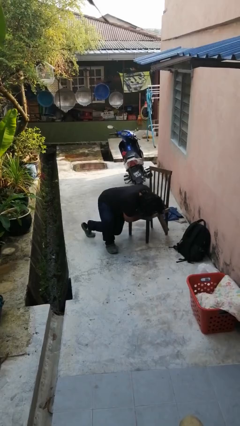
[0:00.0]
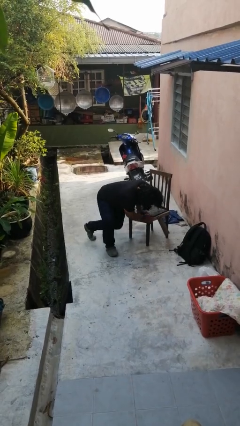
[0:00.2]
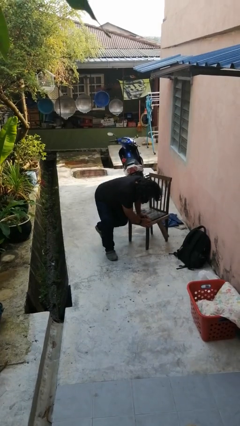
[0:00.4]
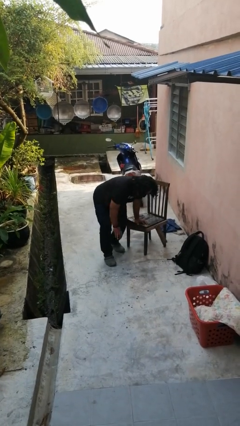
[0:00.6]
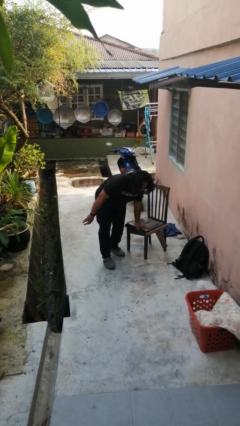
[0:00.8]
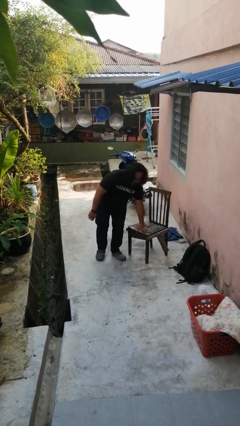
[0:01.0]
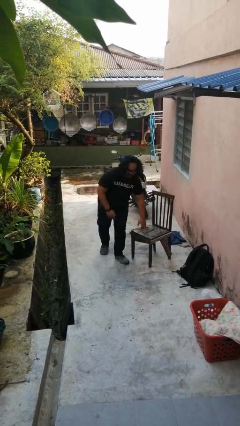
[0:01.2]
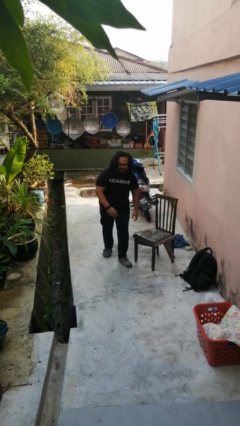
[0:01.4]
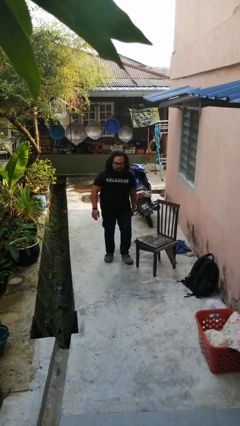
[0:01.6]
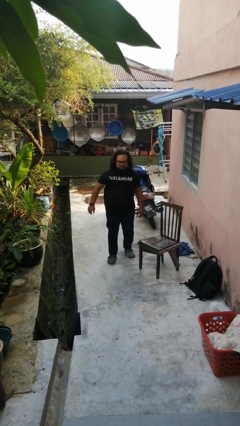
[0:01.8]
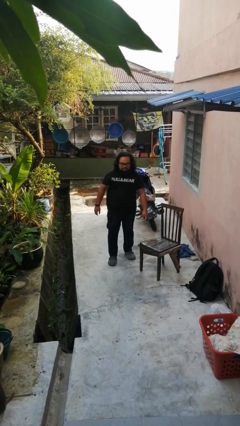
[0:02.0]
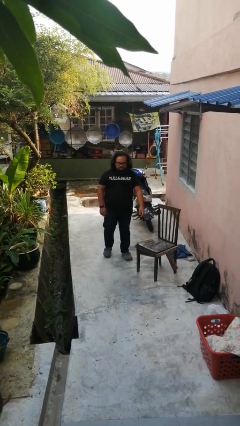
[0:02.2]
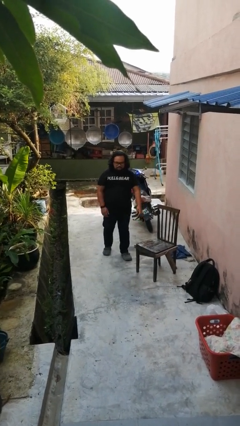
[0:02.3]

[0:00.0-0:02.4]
person stands up from floor

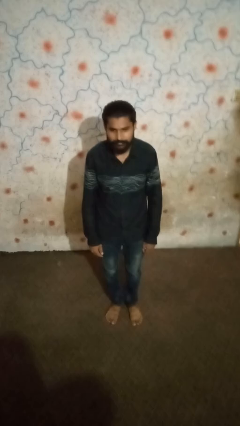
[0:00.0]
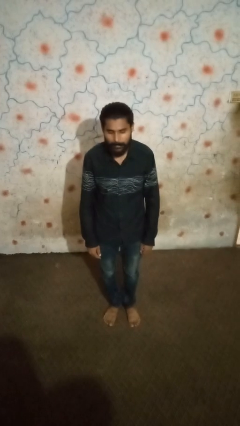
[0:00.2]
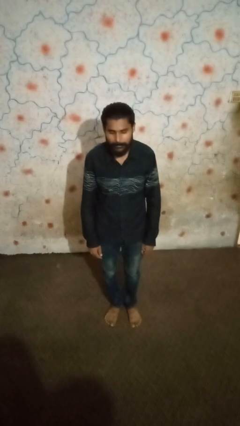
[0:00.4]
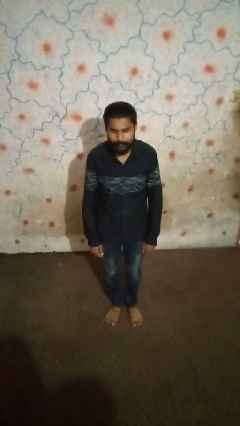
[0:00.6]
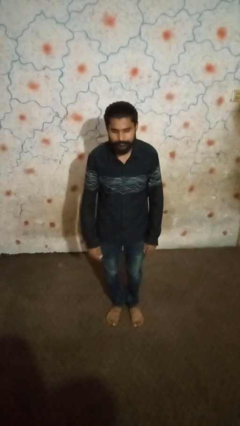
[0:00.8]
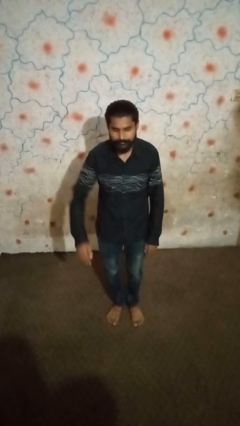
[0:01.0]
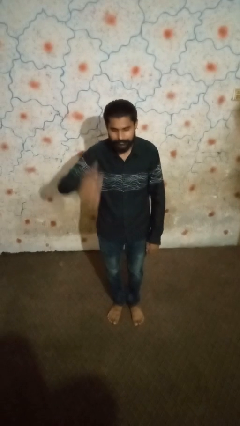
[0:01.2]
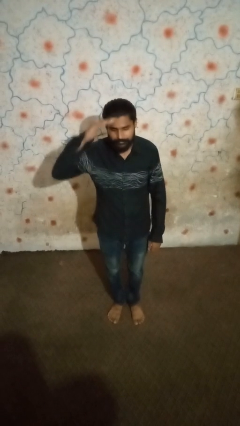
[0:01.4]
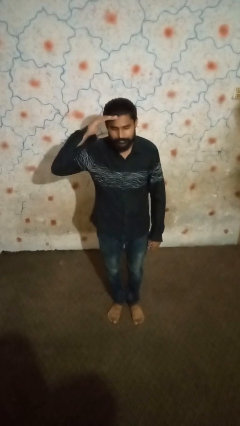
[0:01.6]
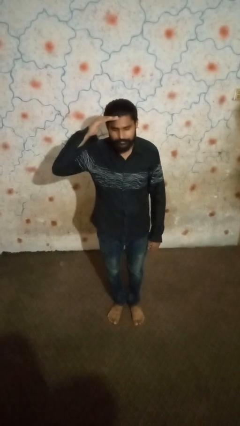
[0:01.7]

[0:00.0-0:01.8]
person salutes

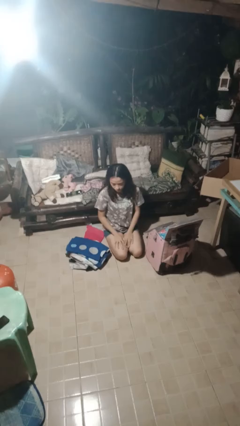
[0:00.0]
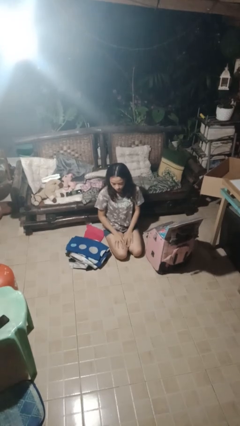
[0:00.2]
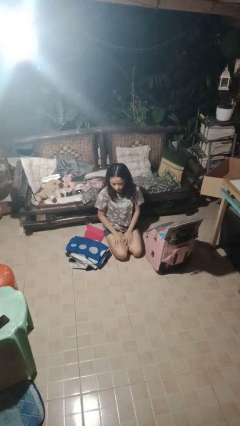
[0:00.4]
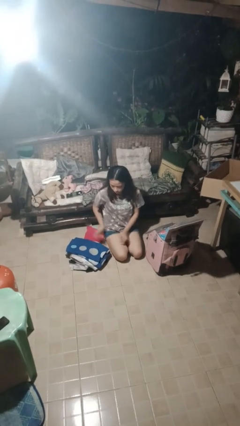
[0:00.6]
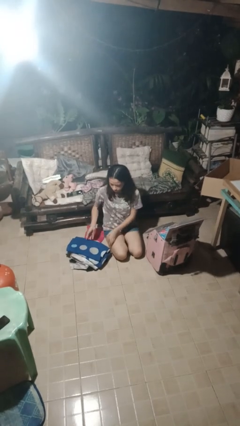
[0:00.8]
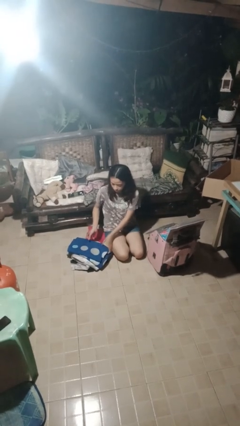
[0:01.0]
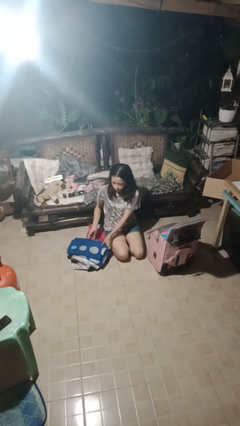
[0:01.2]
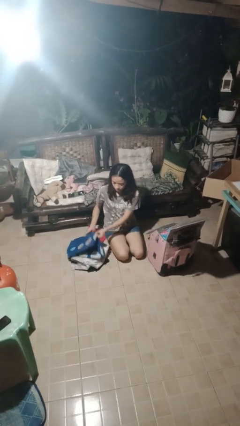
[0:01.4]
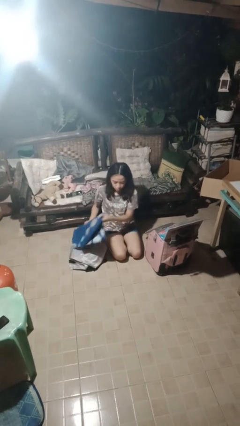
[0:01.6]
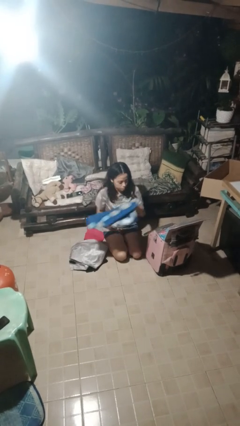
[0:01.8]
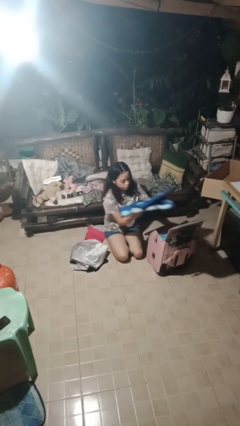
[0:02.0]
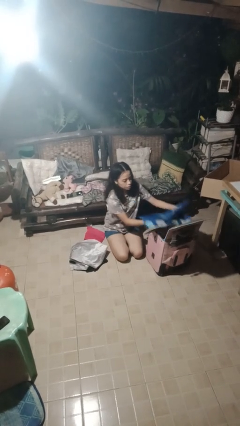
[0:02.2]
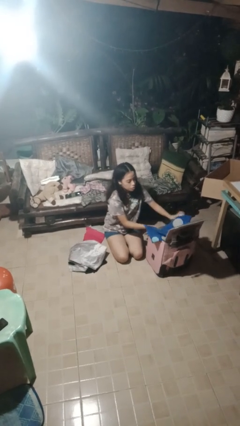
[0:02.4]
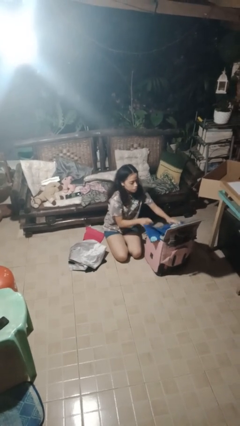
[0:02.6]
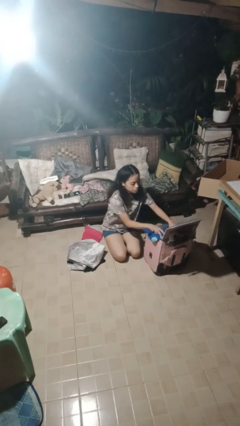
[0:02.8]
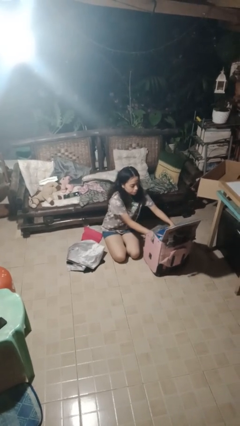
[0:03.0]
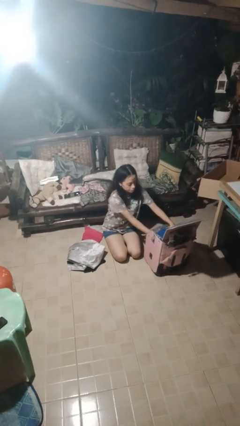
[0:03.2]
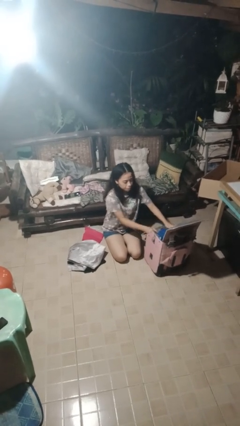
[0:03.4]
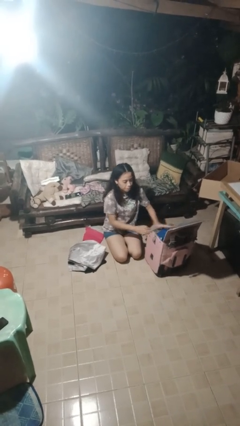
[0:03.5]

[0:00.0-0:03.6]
person loads clothes into suitcase

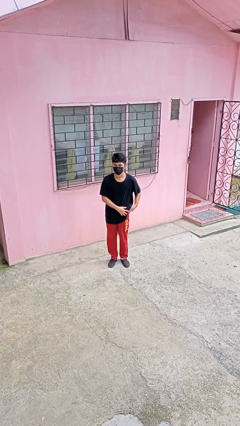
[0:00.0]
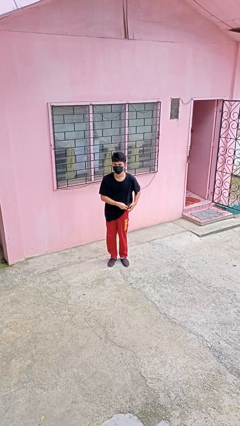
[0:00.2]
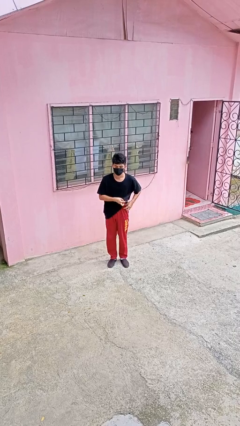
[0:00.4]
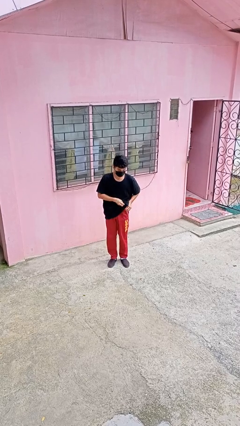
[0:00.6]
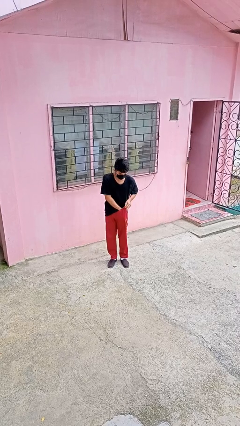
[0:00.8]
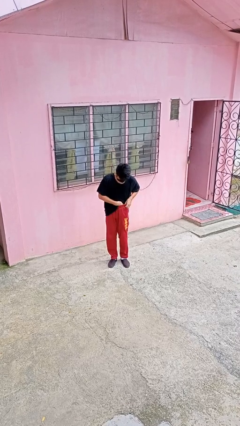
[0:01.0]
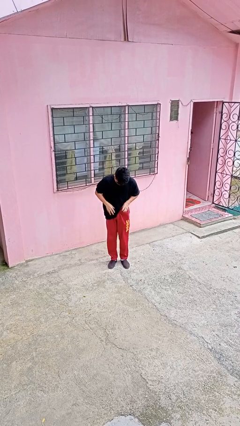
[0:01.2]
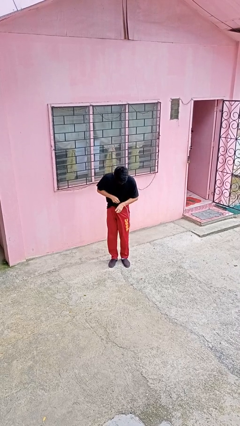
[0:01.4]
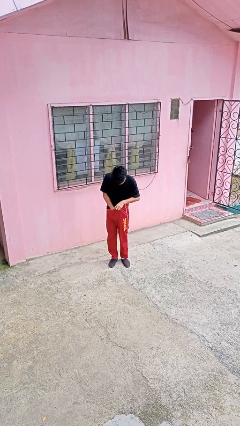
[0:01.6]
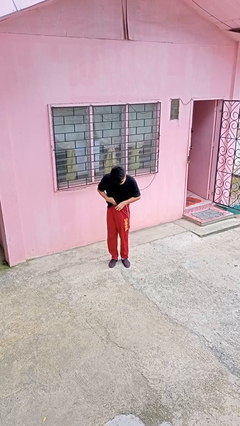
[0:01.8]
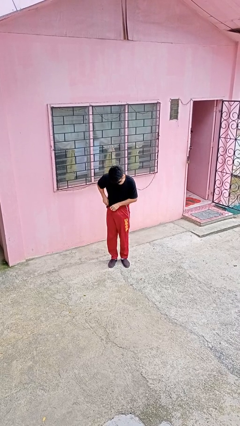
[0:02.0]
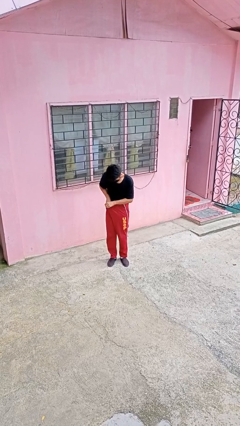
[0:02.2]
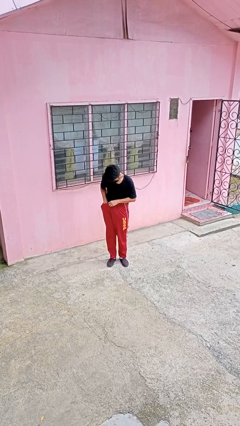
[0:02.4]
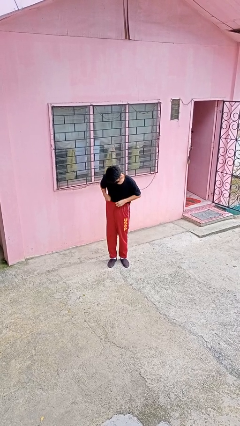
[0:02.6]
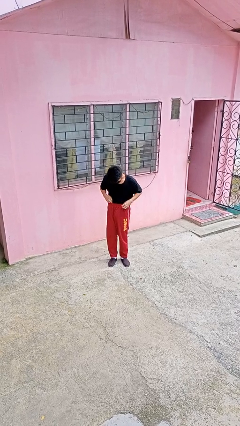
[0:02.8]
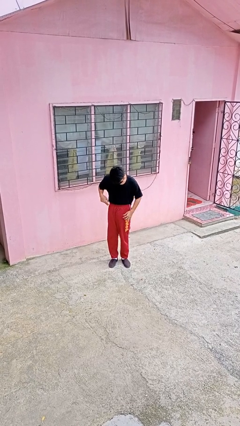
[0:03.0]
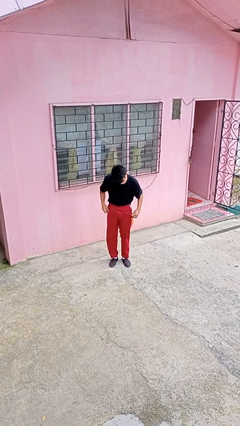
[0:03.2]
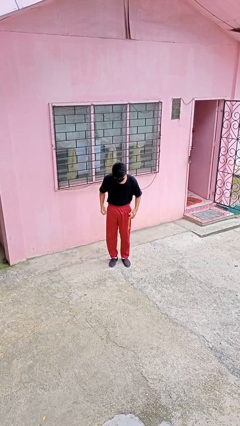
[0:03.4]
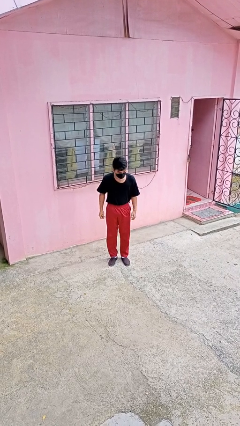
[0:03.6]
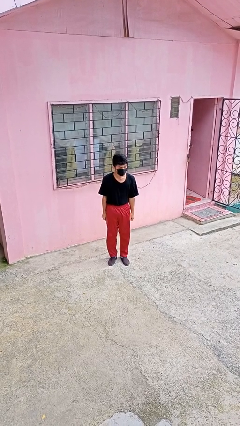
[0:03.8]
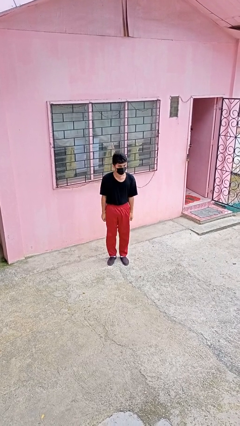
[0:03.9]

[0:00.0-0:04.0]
person tucks in shirt

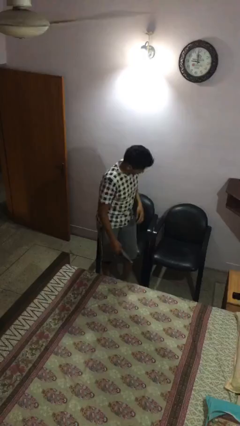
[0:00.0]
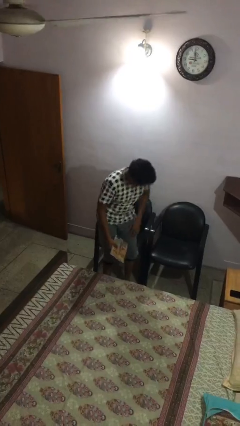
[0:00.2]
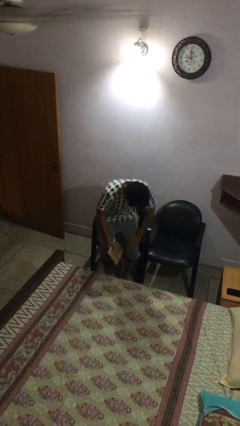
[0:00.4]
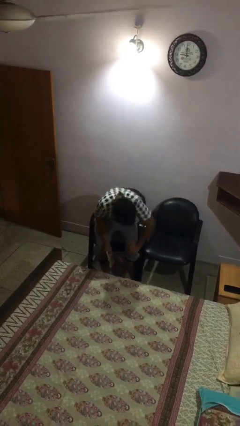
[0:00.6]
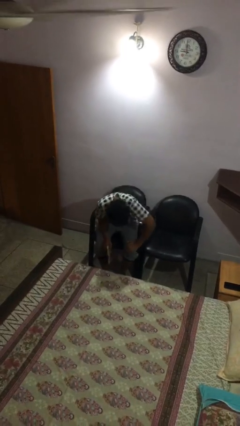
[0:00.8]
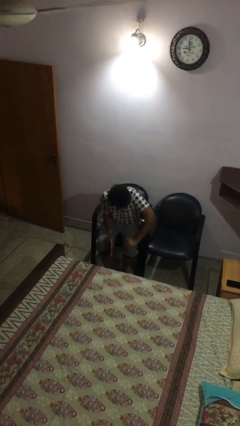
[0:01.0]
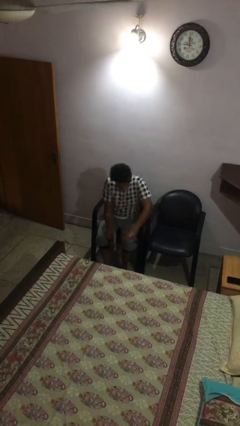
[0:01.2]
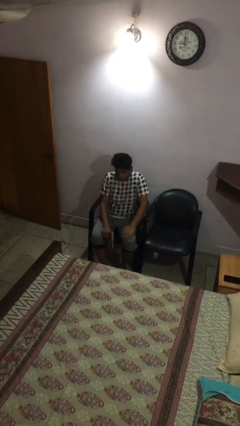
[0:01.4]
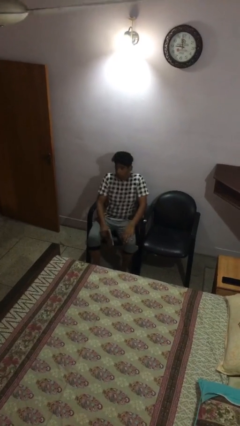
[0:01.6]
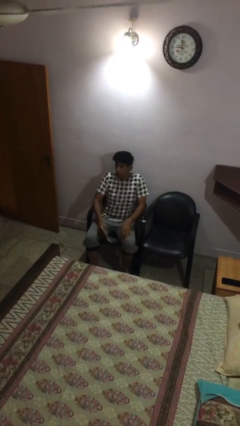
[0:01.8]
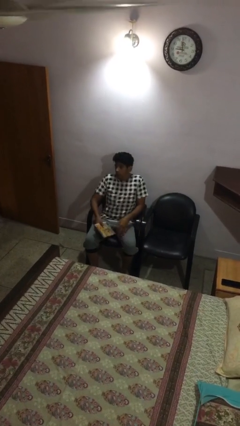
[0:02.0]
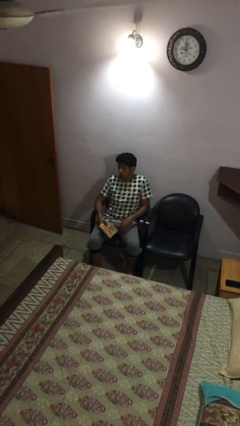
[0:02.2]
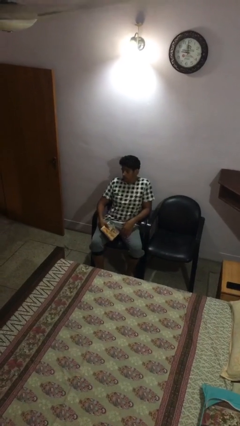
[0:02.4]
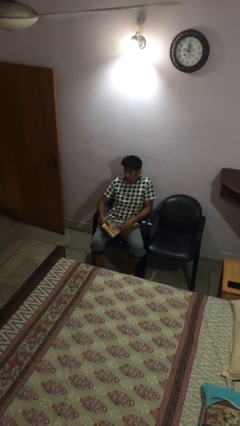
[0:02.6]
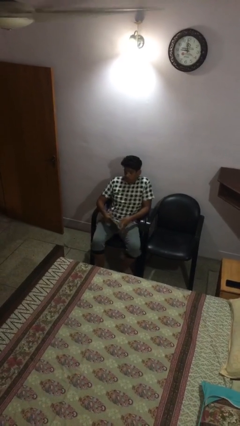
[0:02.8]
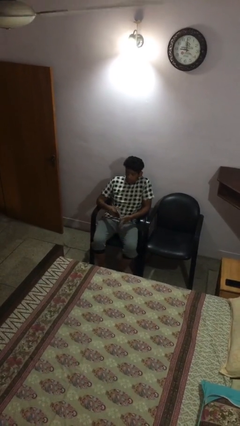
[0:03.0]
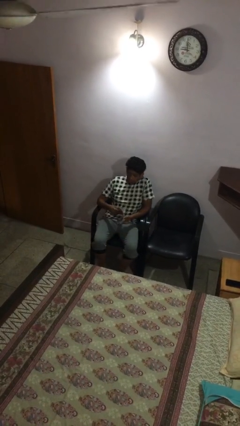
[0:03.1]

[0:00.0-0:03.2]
person sits down

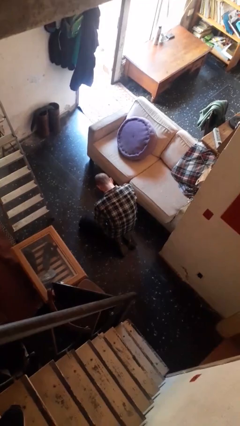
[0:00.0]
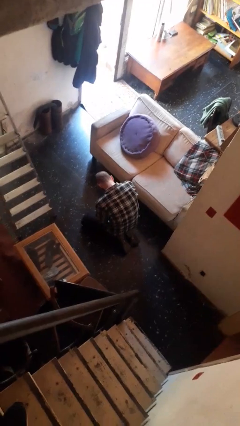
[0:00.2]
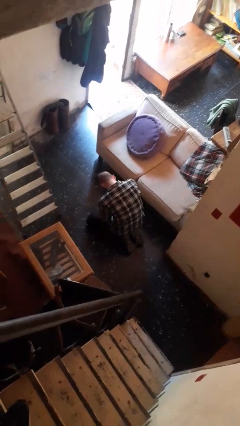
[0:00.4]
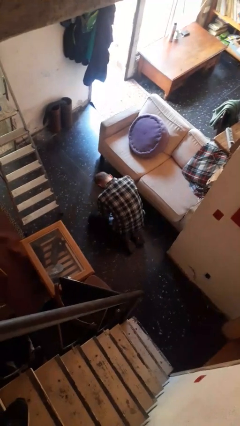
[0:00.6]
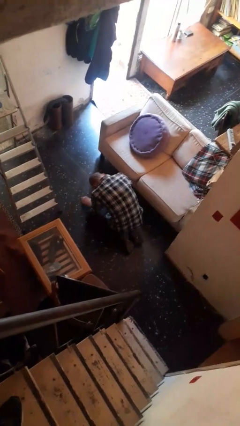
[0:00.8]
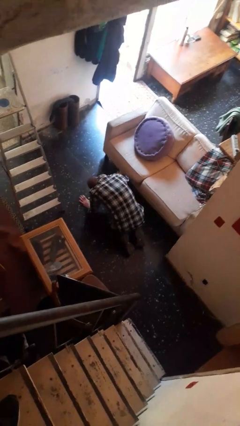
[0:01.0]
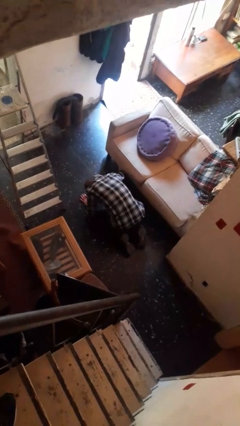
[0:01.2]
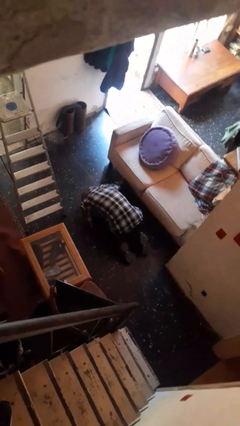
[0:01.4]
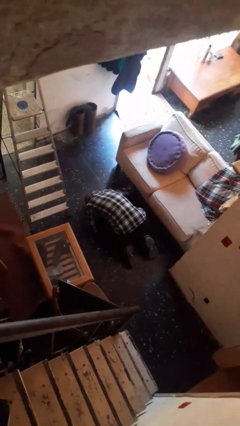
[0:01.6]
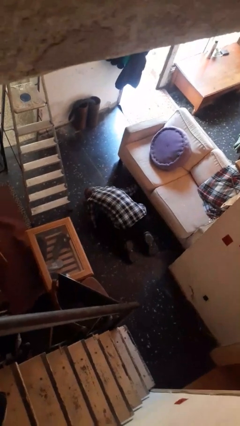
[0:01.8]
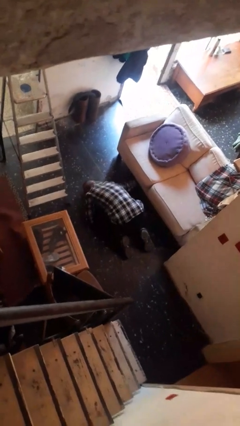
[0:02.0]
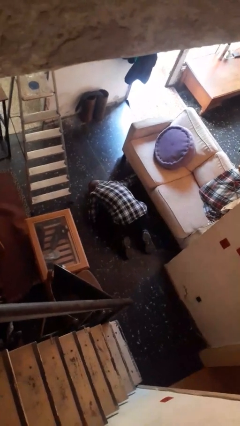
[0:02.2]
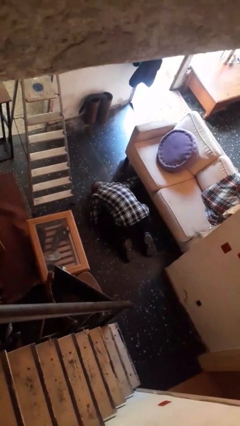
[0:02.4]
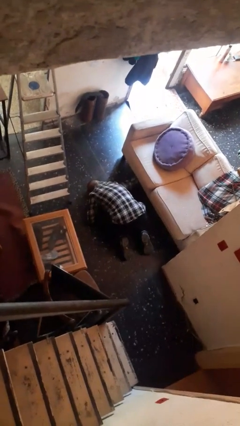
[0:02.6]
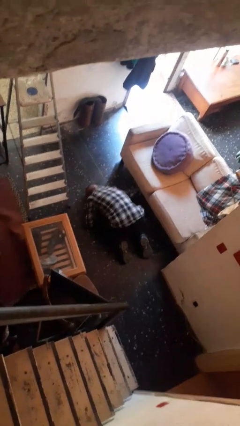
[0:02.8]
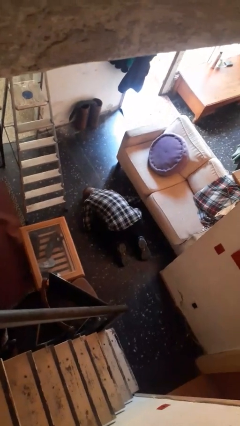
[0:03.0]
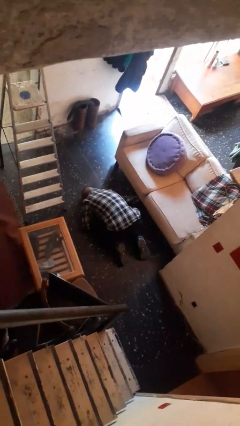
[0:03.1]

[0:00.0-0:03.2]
person searches under couch
